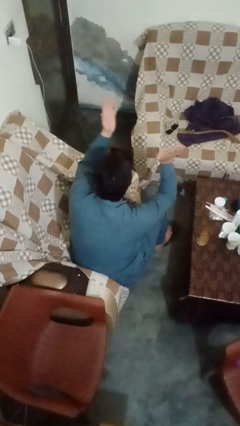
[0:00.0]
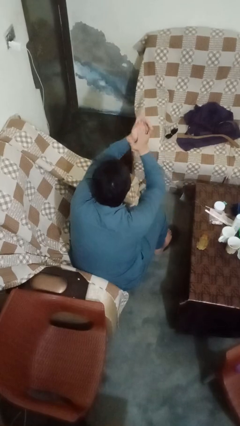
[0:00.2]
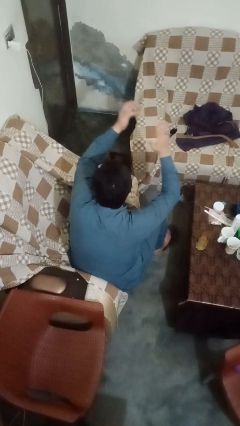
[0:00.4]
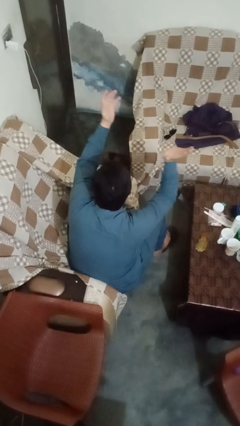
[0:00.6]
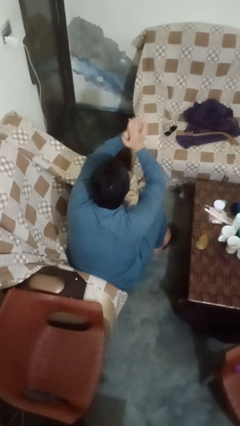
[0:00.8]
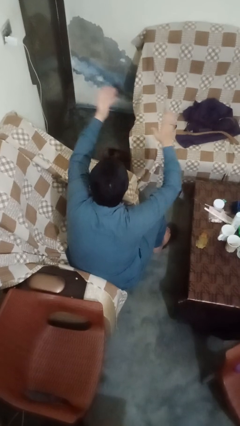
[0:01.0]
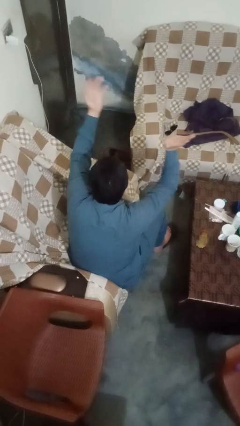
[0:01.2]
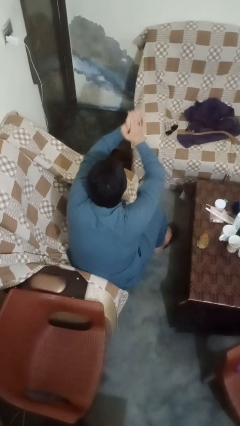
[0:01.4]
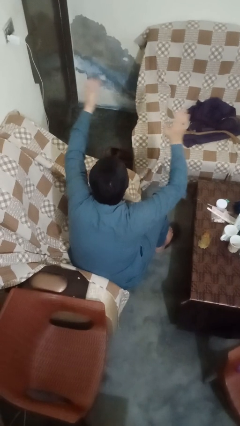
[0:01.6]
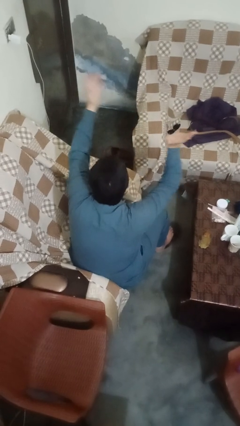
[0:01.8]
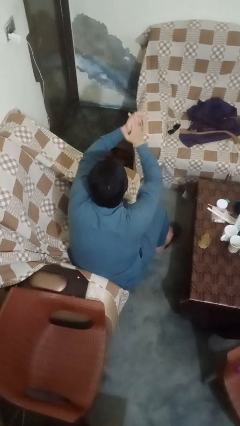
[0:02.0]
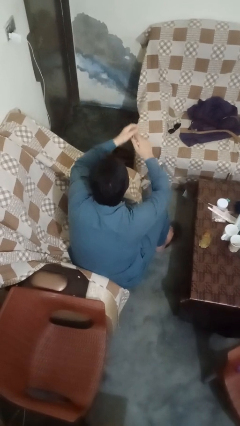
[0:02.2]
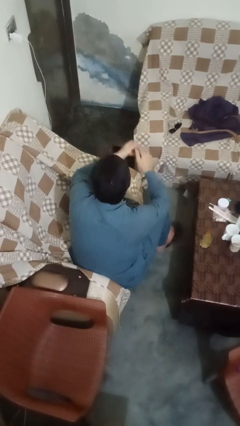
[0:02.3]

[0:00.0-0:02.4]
person claps hands

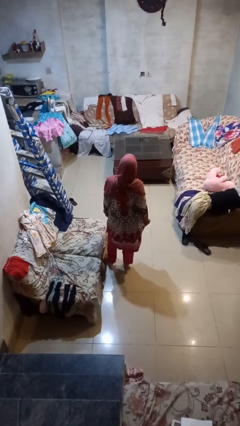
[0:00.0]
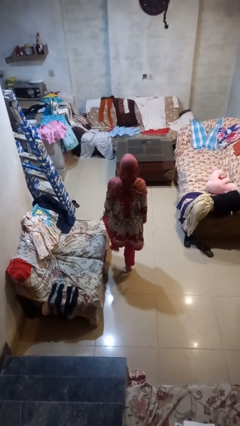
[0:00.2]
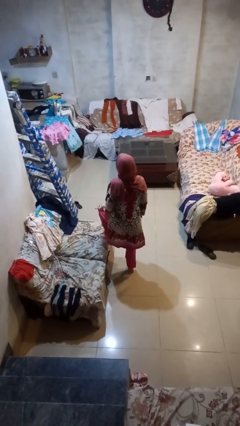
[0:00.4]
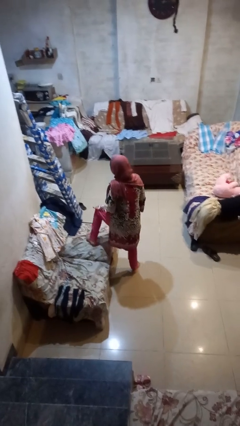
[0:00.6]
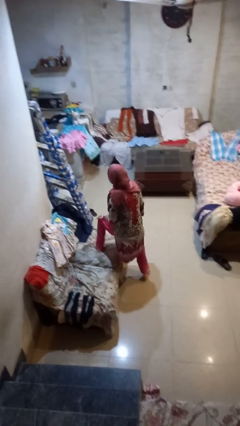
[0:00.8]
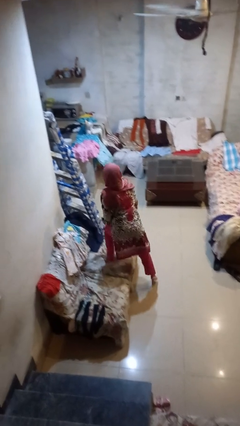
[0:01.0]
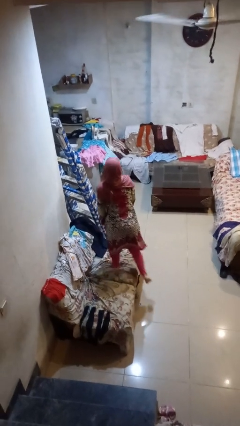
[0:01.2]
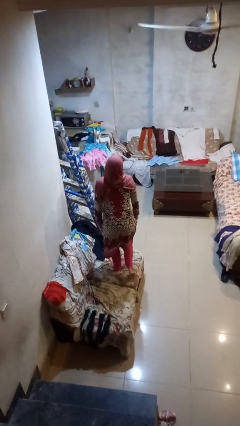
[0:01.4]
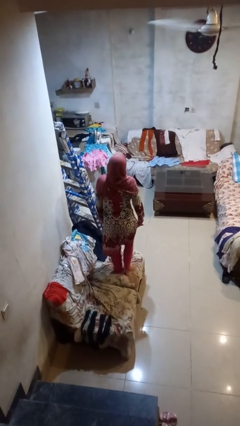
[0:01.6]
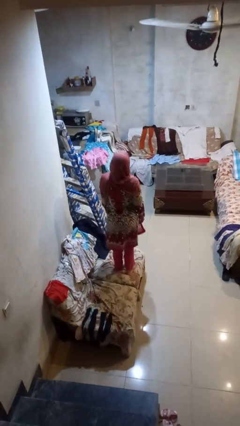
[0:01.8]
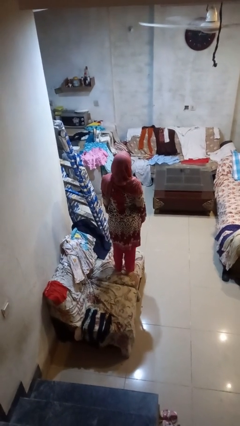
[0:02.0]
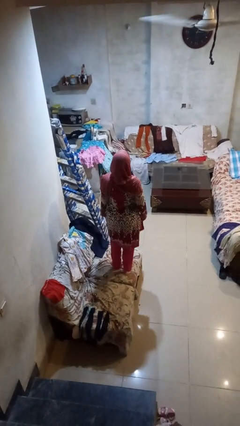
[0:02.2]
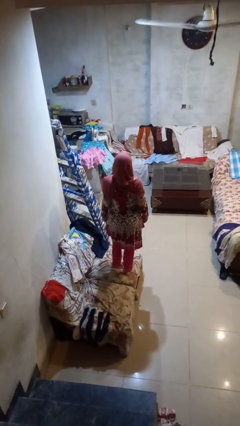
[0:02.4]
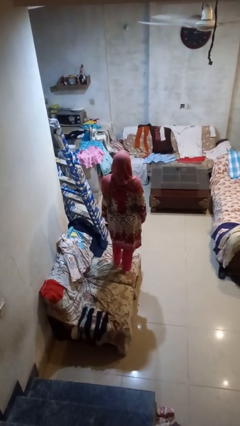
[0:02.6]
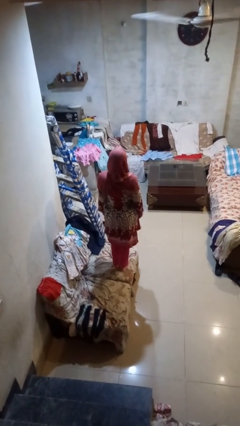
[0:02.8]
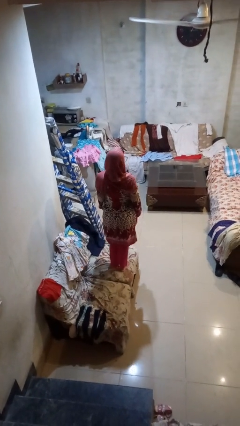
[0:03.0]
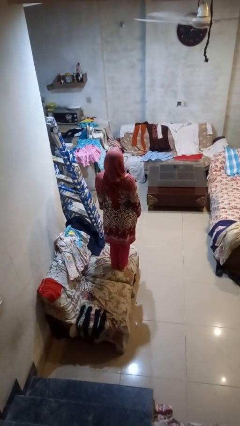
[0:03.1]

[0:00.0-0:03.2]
person climbs on couch

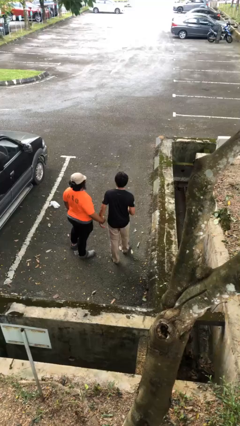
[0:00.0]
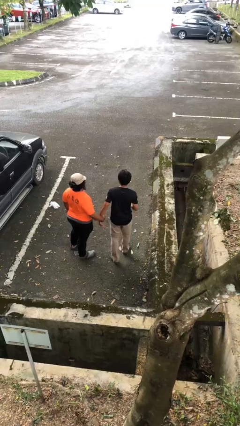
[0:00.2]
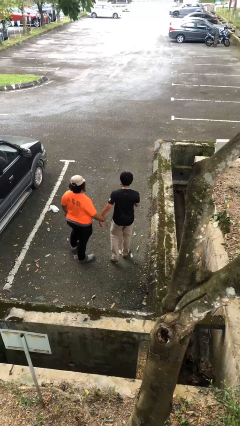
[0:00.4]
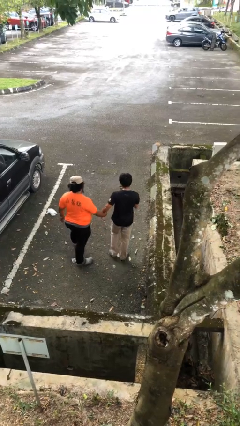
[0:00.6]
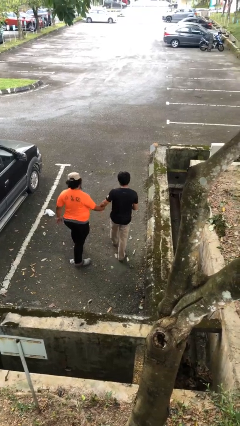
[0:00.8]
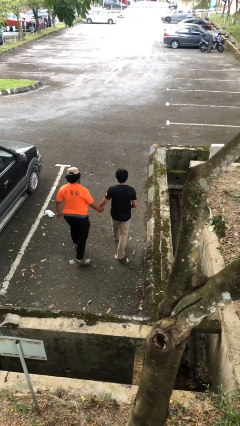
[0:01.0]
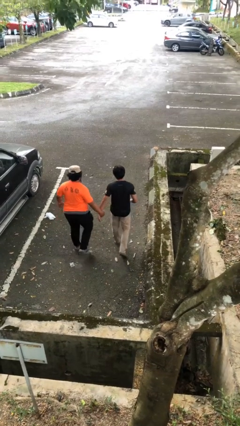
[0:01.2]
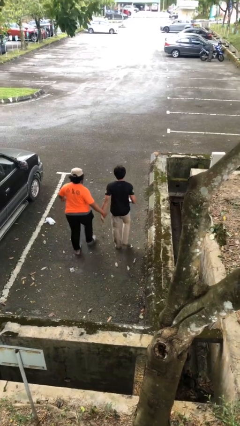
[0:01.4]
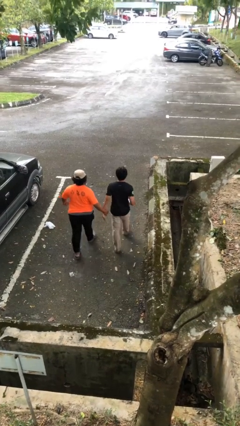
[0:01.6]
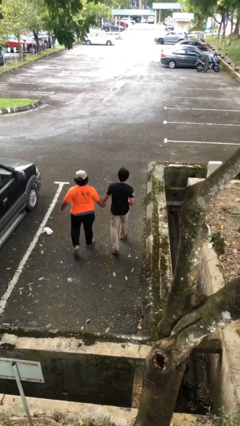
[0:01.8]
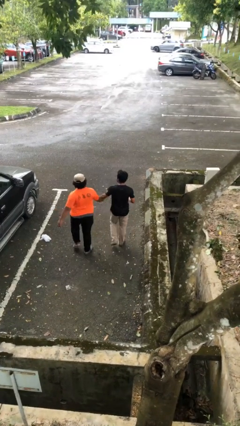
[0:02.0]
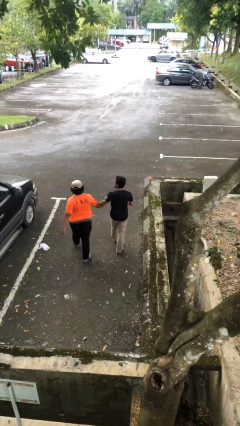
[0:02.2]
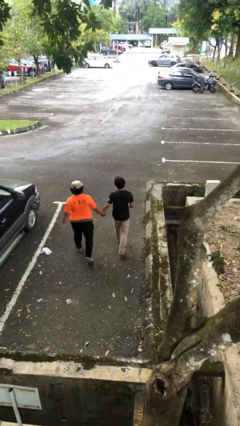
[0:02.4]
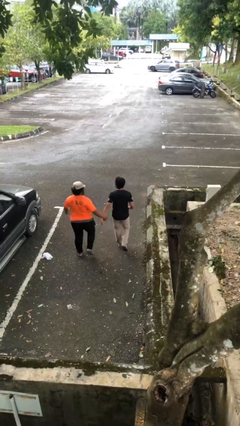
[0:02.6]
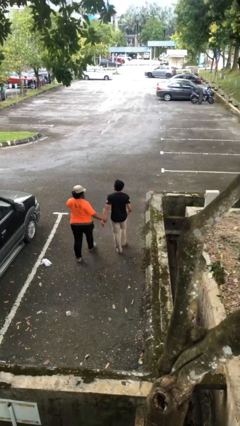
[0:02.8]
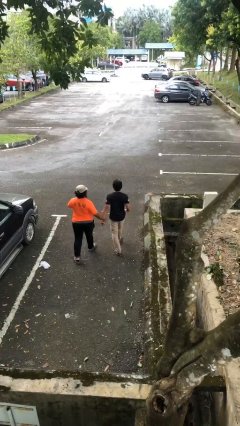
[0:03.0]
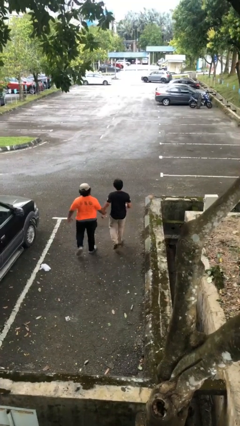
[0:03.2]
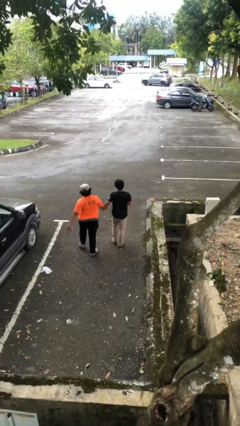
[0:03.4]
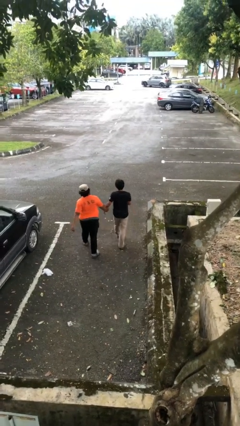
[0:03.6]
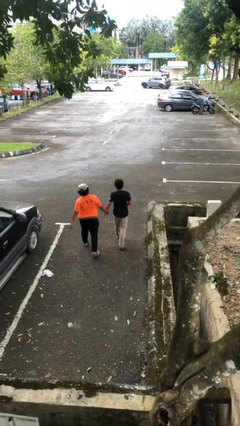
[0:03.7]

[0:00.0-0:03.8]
person holds hand

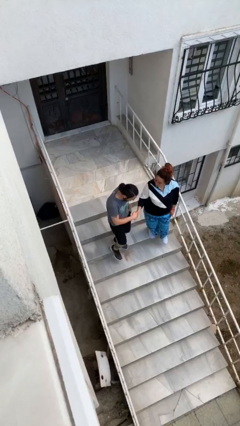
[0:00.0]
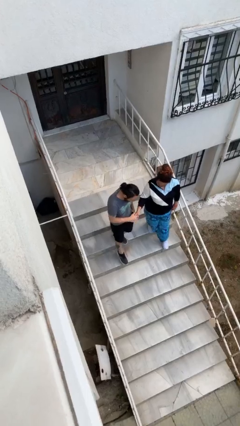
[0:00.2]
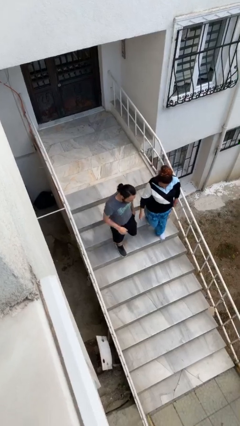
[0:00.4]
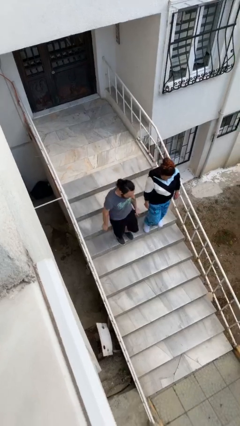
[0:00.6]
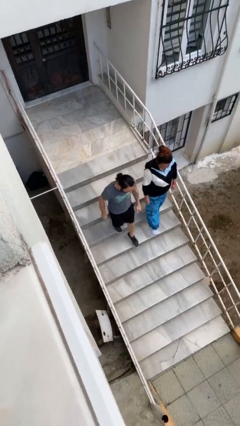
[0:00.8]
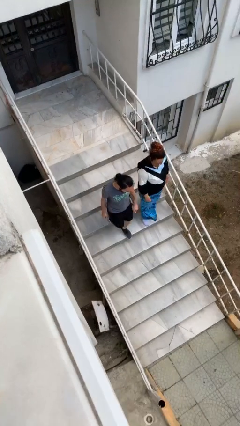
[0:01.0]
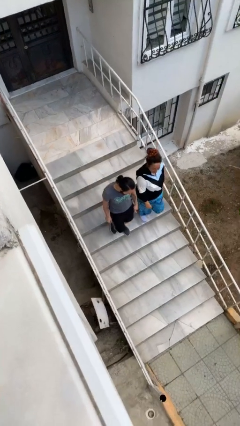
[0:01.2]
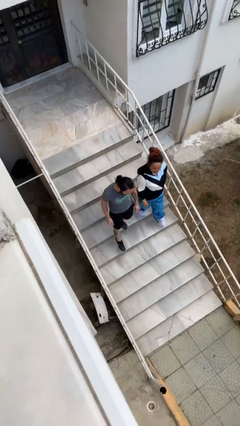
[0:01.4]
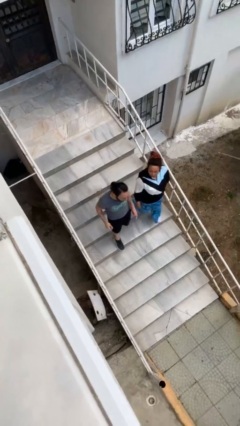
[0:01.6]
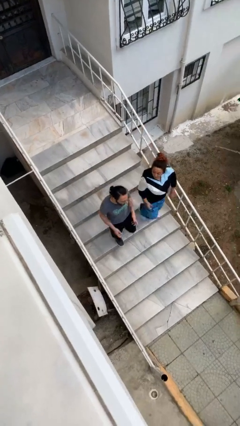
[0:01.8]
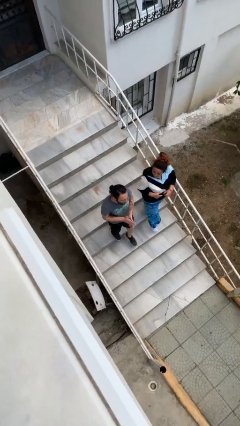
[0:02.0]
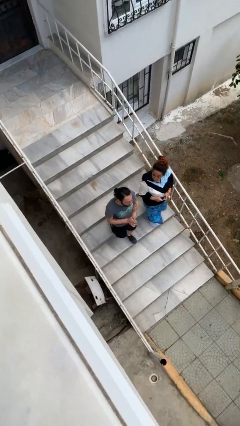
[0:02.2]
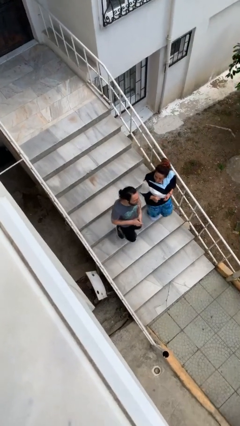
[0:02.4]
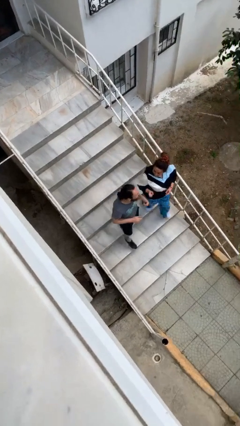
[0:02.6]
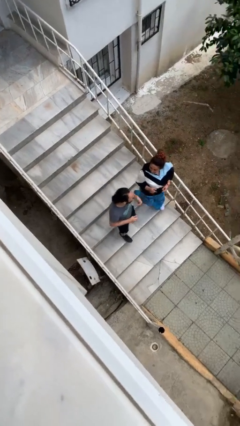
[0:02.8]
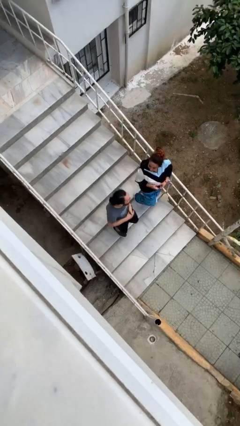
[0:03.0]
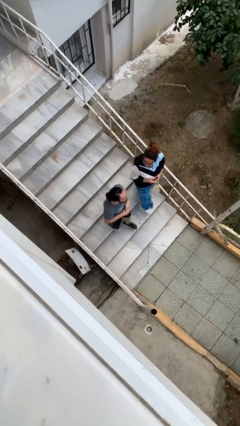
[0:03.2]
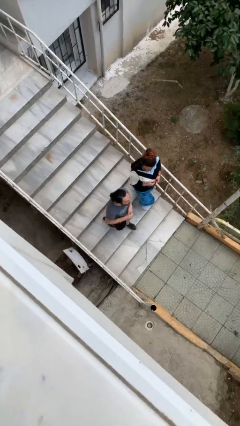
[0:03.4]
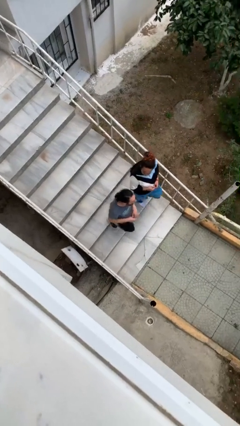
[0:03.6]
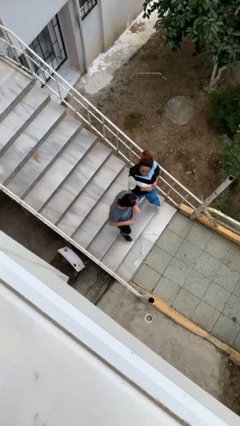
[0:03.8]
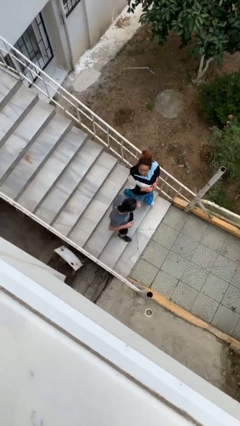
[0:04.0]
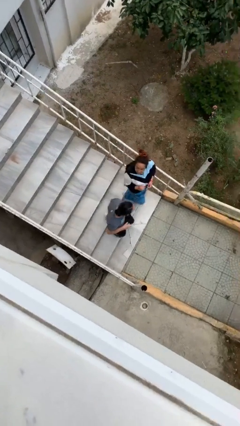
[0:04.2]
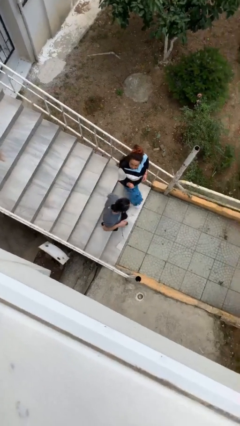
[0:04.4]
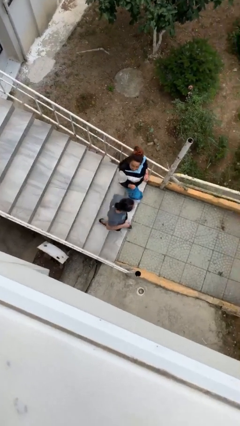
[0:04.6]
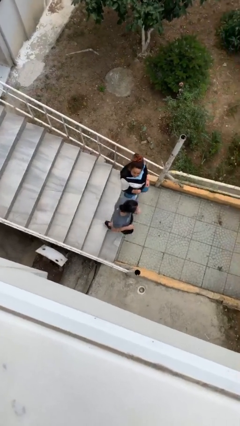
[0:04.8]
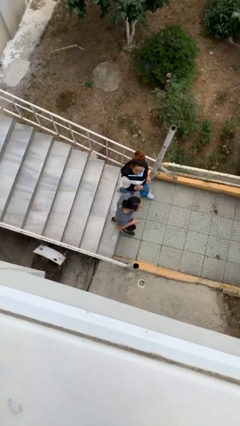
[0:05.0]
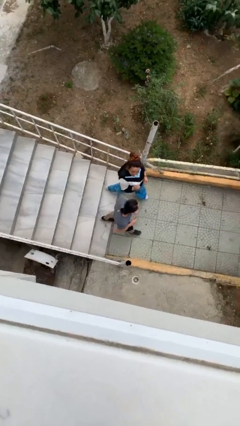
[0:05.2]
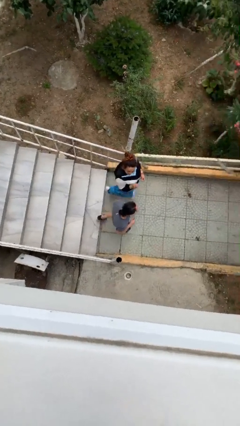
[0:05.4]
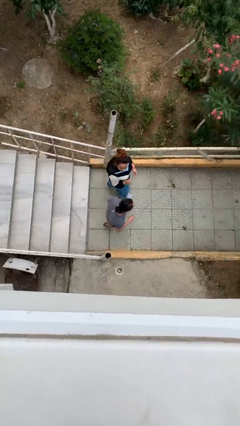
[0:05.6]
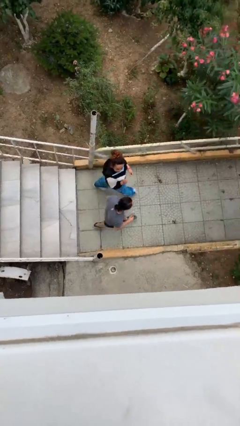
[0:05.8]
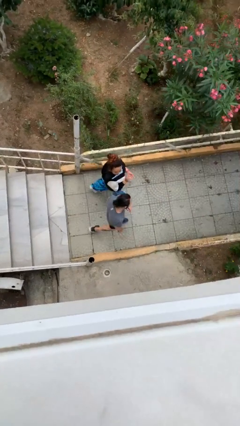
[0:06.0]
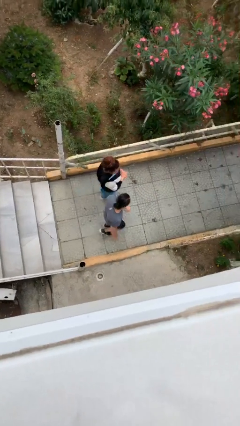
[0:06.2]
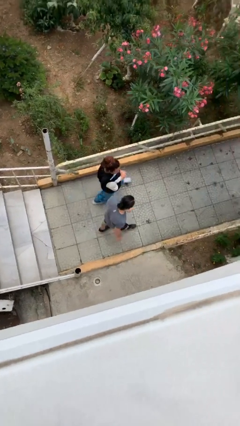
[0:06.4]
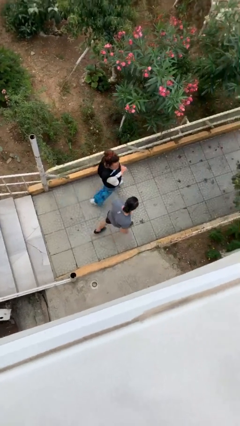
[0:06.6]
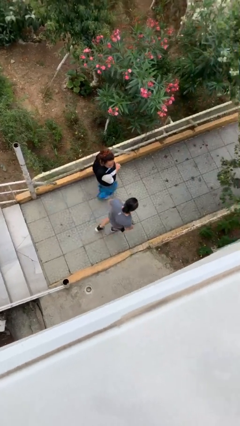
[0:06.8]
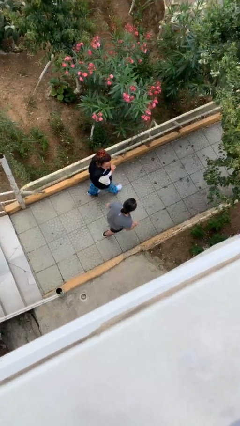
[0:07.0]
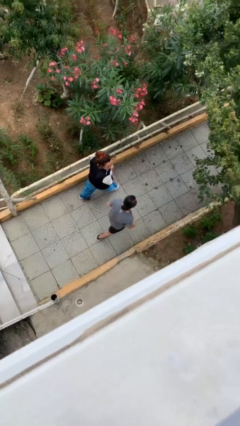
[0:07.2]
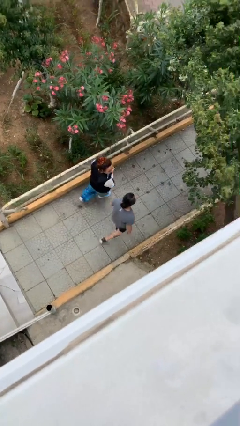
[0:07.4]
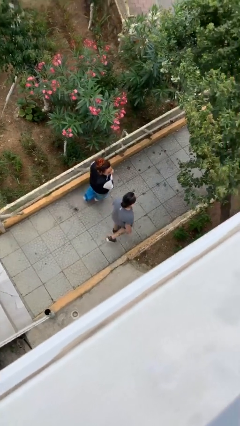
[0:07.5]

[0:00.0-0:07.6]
person talks to person

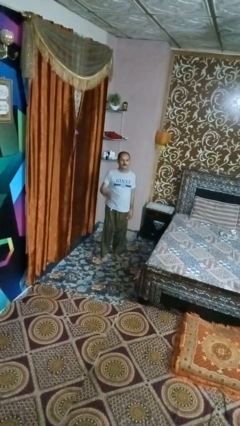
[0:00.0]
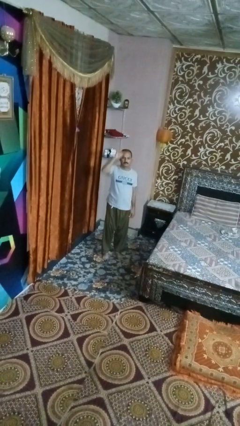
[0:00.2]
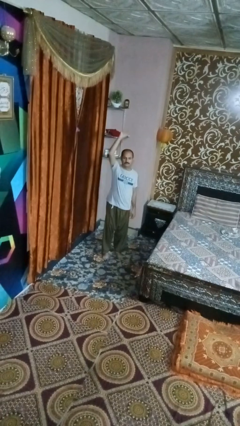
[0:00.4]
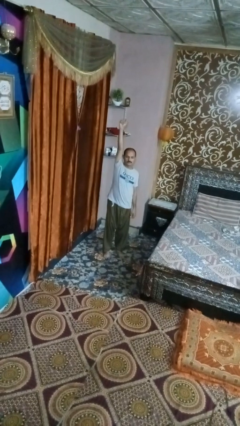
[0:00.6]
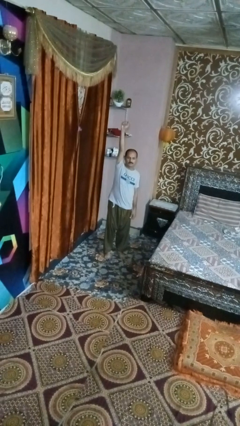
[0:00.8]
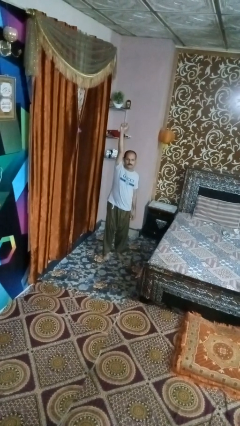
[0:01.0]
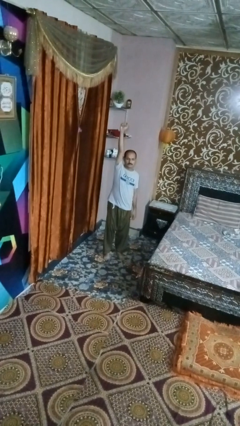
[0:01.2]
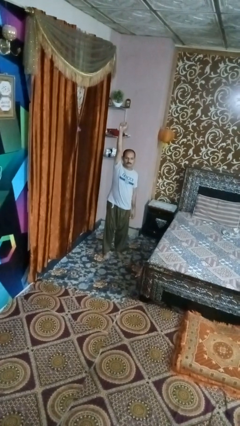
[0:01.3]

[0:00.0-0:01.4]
person punches
